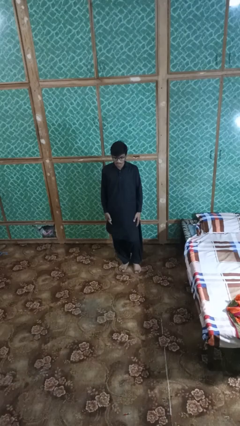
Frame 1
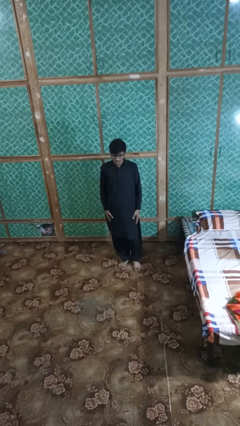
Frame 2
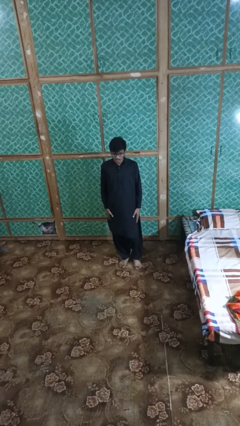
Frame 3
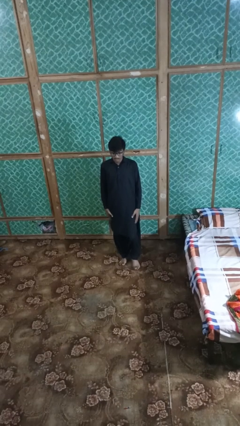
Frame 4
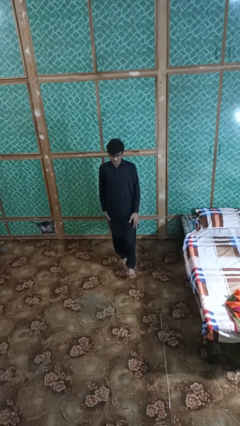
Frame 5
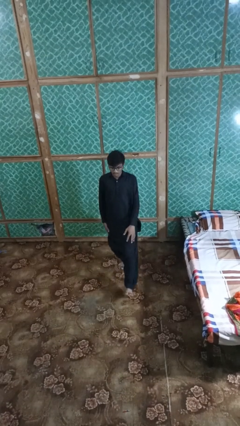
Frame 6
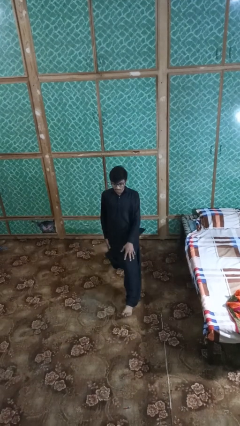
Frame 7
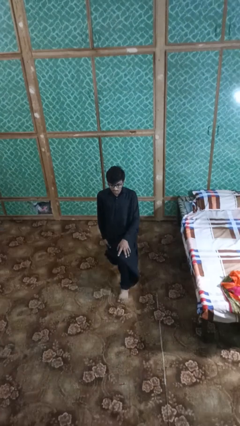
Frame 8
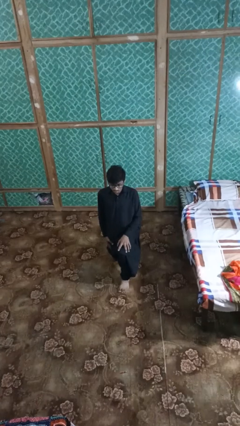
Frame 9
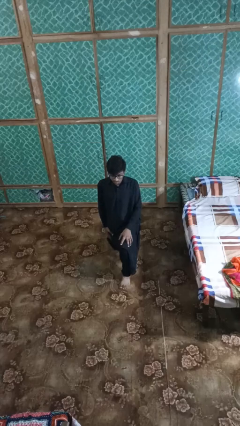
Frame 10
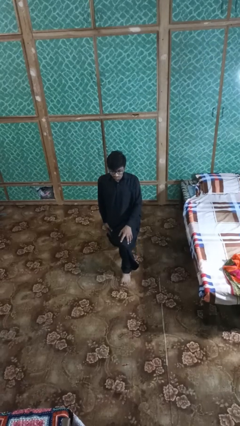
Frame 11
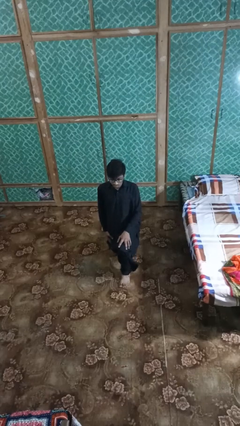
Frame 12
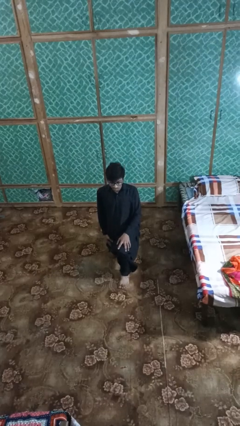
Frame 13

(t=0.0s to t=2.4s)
person exercises with lunges

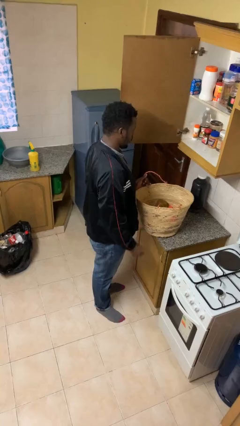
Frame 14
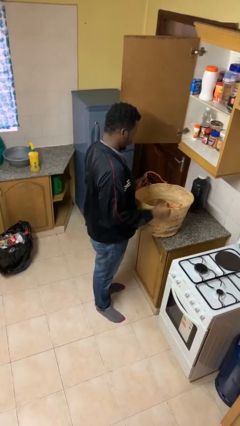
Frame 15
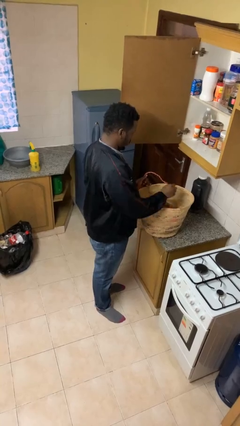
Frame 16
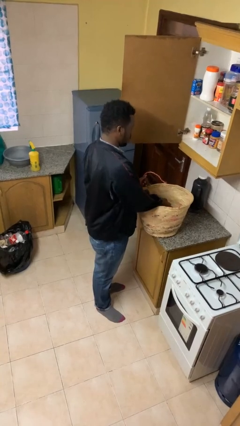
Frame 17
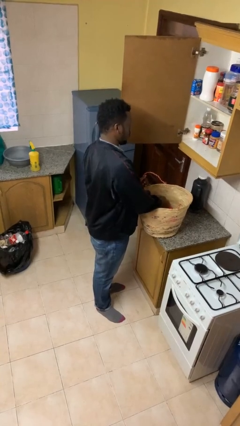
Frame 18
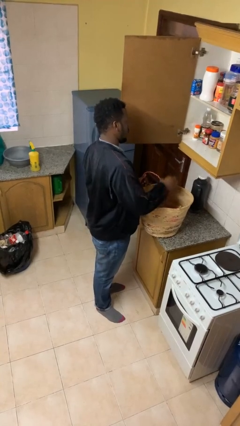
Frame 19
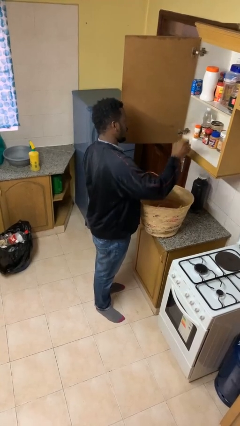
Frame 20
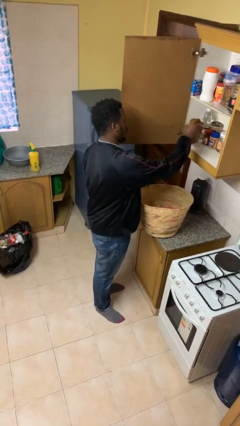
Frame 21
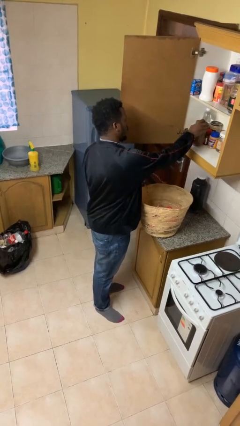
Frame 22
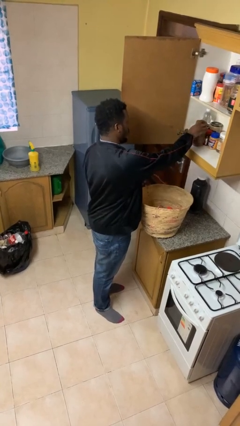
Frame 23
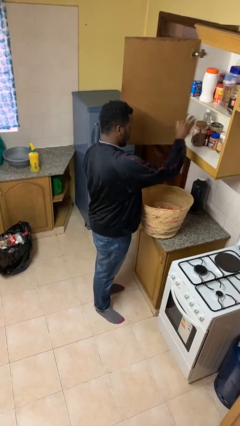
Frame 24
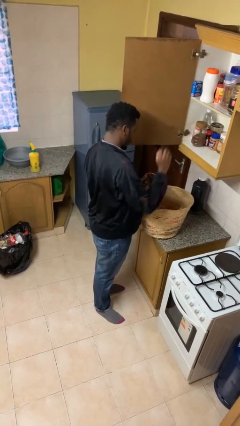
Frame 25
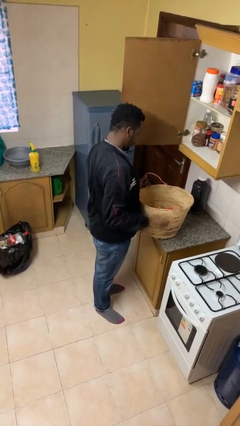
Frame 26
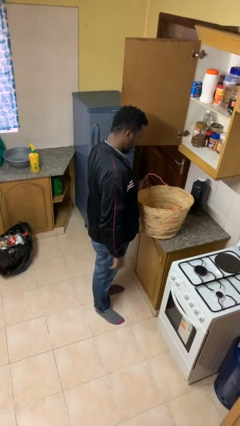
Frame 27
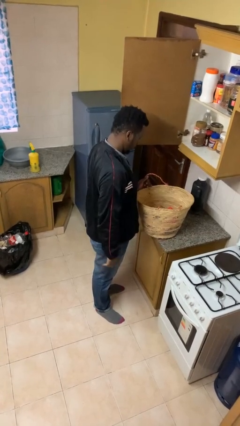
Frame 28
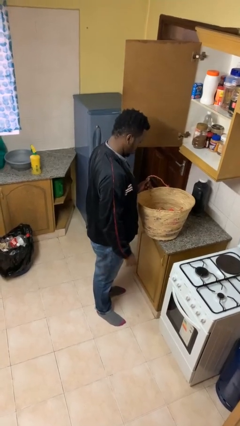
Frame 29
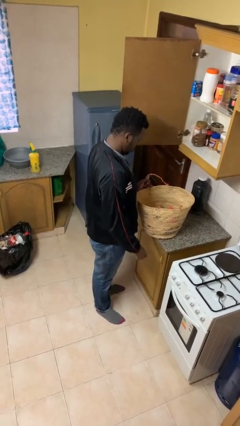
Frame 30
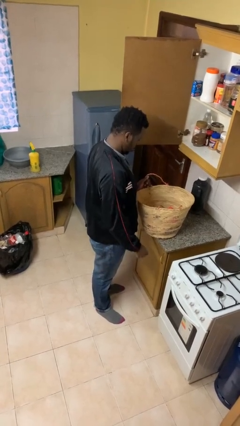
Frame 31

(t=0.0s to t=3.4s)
person loads groceries into cabinet

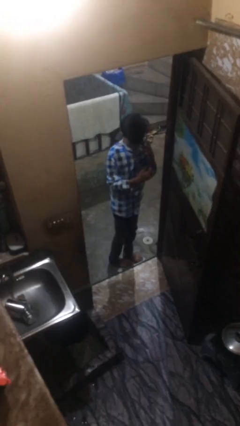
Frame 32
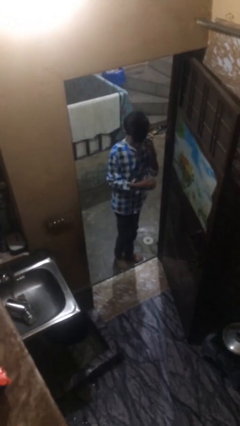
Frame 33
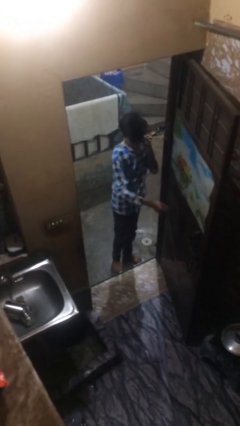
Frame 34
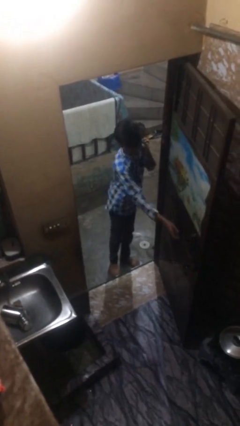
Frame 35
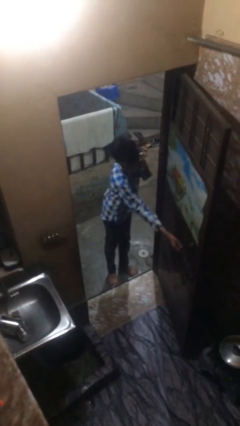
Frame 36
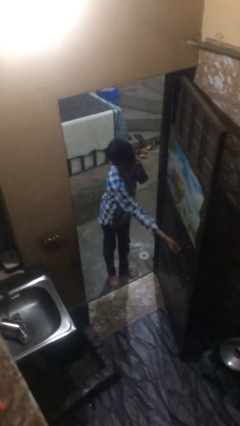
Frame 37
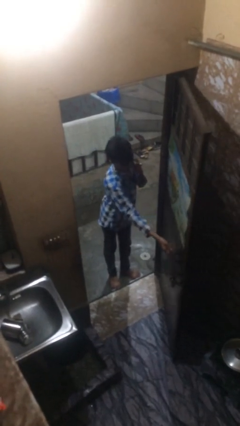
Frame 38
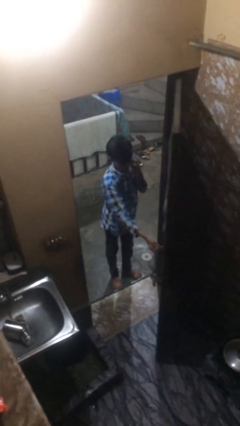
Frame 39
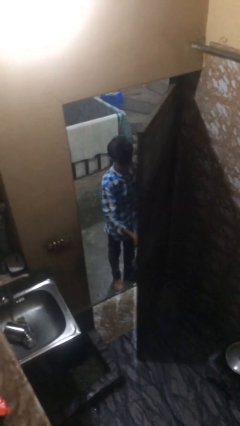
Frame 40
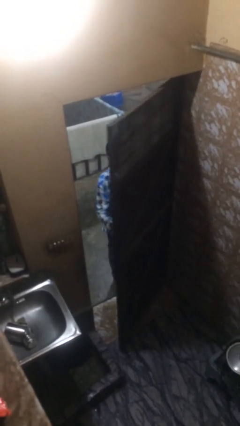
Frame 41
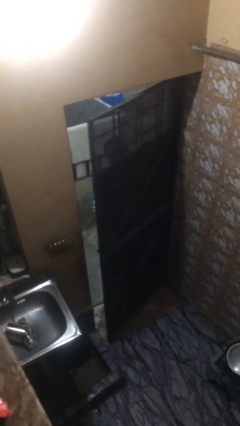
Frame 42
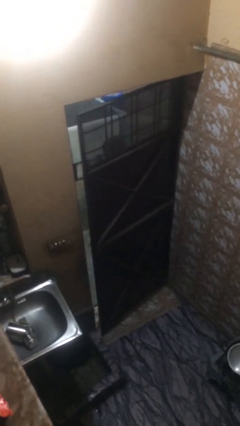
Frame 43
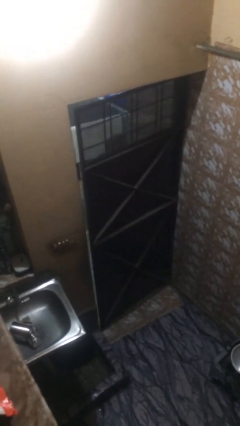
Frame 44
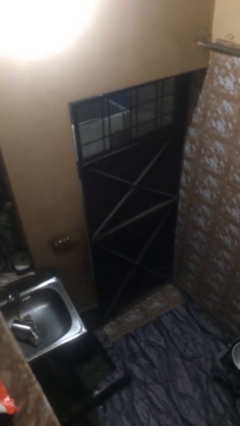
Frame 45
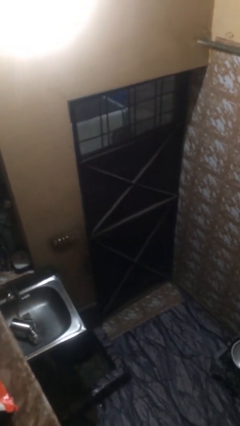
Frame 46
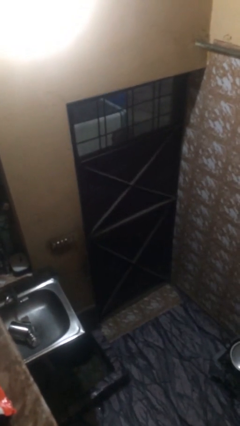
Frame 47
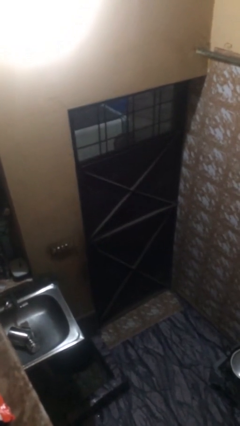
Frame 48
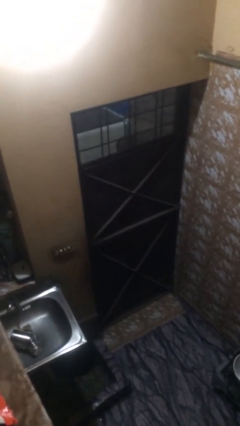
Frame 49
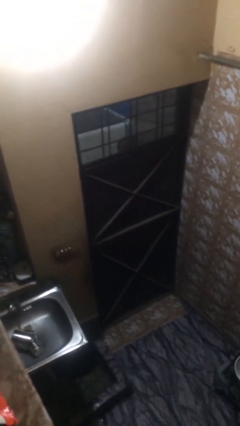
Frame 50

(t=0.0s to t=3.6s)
person closes facility door

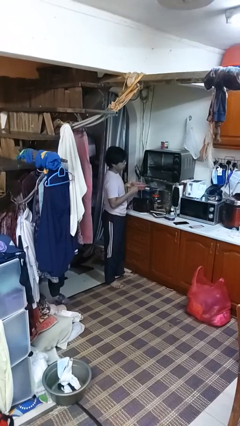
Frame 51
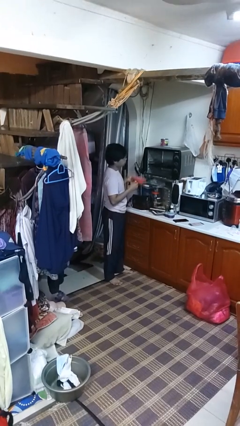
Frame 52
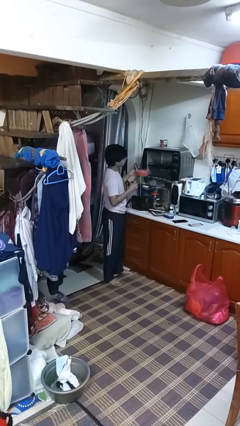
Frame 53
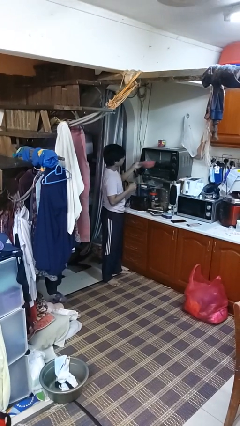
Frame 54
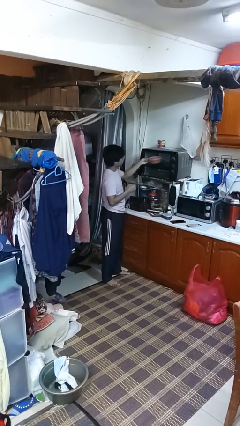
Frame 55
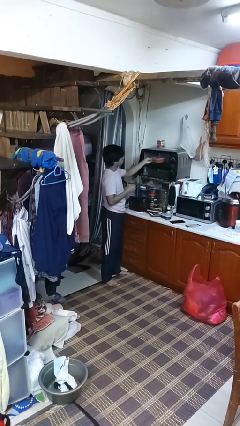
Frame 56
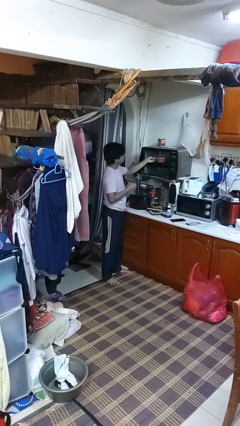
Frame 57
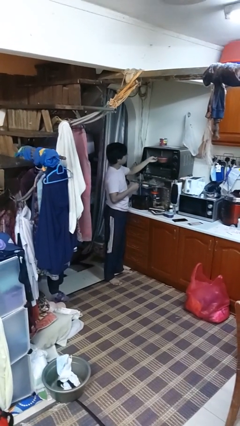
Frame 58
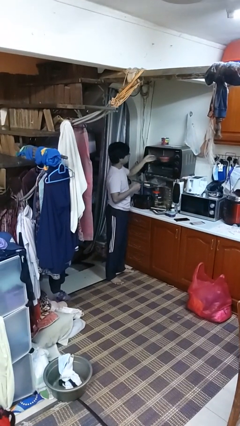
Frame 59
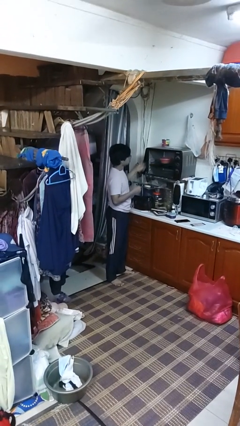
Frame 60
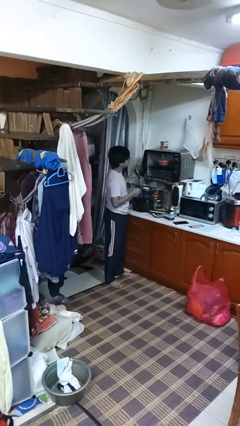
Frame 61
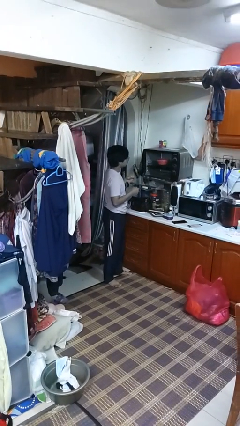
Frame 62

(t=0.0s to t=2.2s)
person puts object into oven

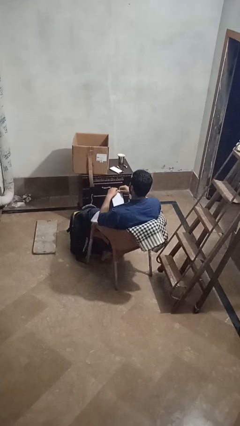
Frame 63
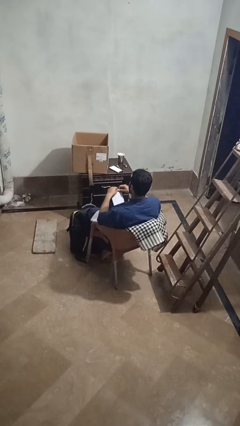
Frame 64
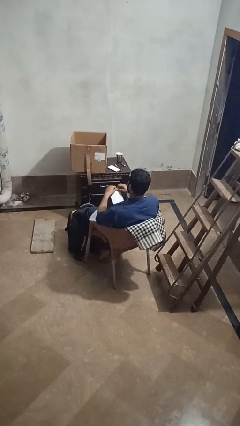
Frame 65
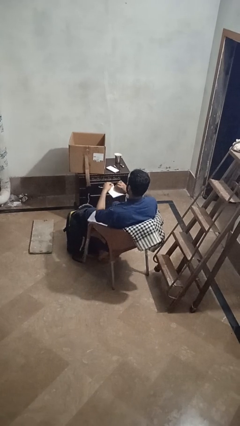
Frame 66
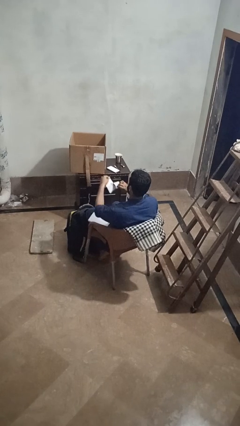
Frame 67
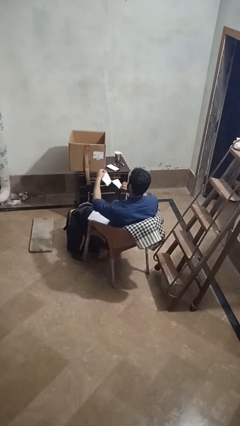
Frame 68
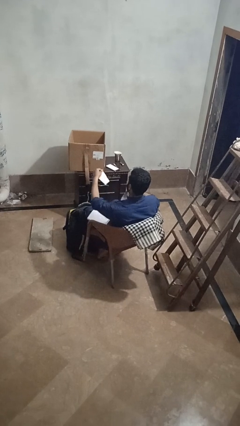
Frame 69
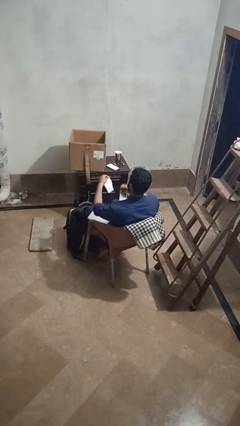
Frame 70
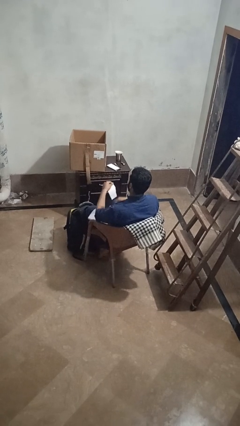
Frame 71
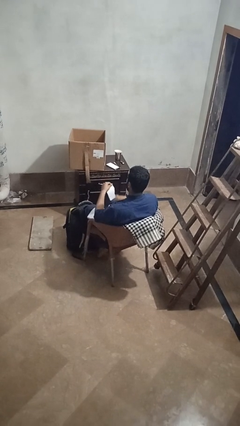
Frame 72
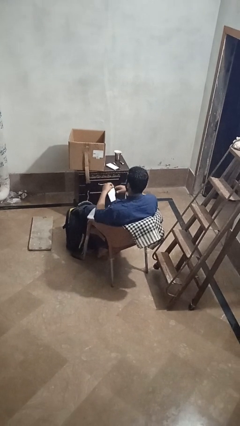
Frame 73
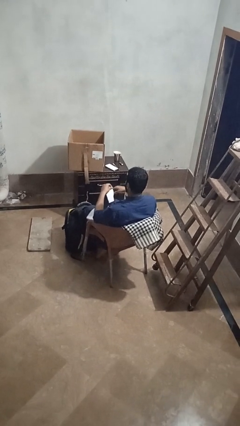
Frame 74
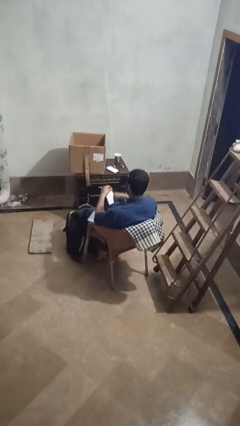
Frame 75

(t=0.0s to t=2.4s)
person tears paper

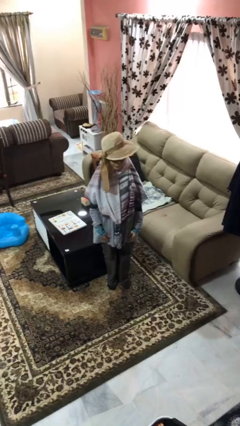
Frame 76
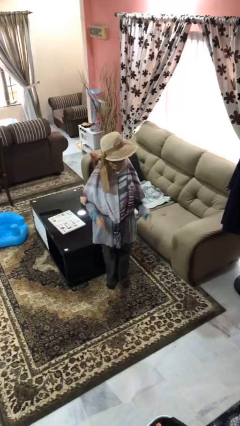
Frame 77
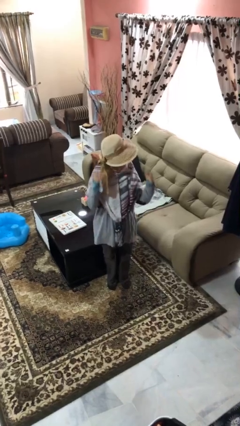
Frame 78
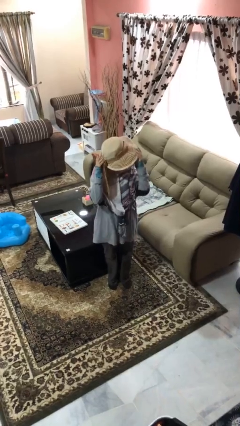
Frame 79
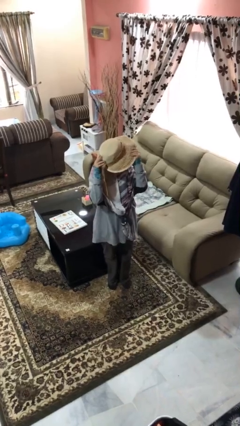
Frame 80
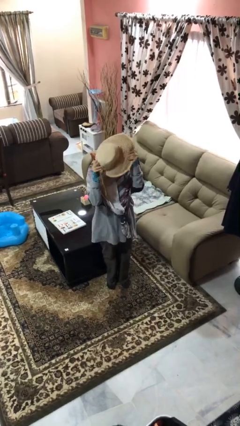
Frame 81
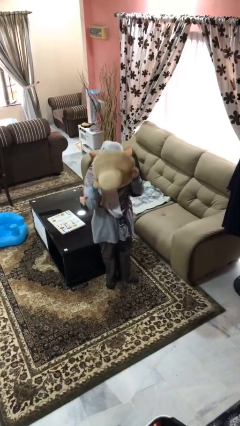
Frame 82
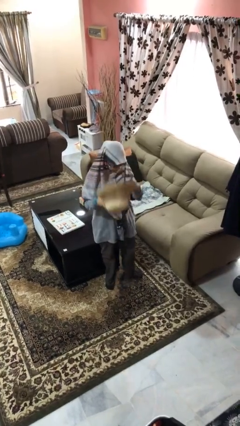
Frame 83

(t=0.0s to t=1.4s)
person takes off hat

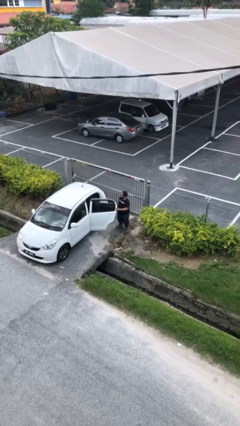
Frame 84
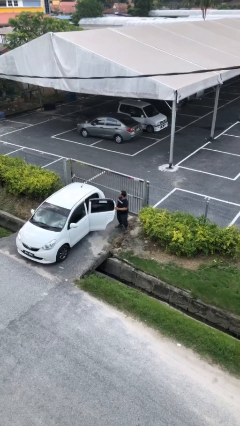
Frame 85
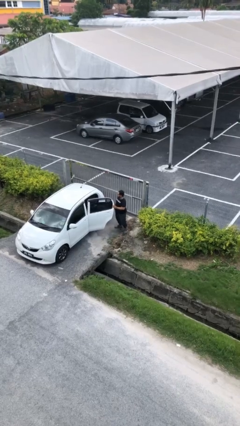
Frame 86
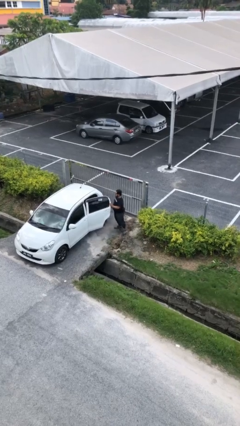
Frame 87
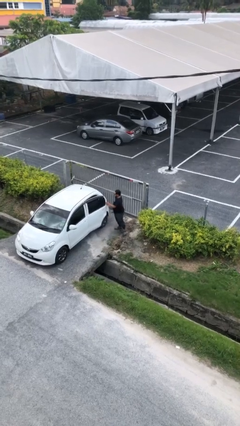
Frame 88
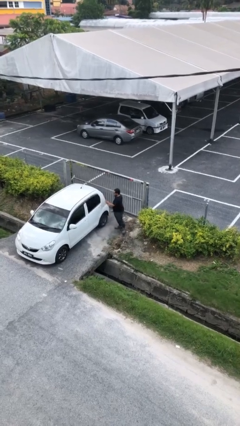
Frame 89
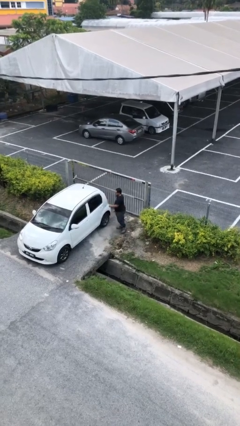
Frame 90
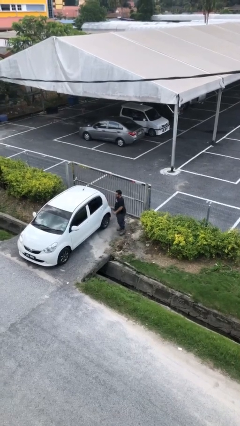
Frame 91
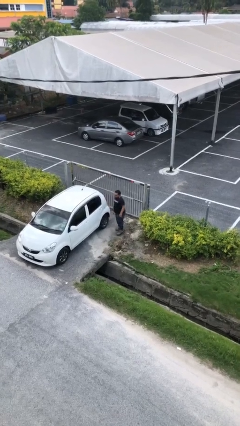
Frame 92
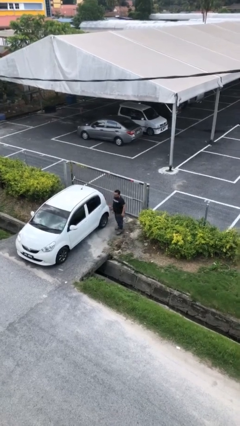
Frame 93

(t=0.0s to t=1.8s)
person closes car door
